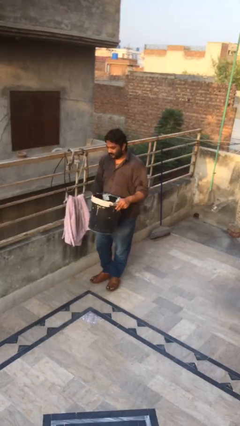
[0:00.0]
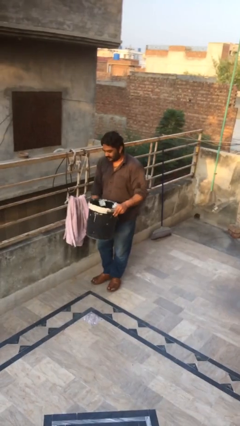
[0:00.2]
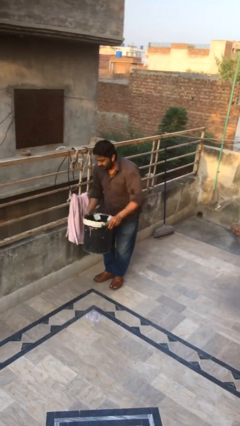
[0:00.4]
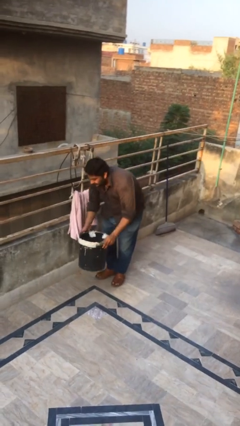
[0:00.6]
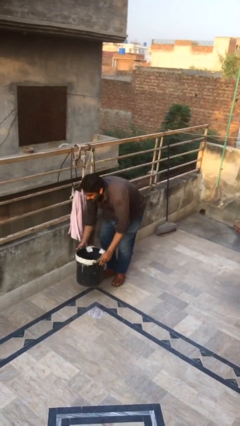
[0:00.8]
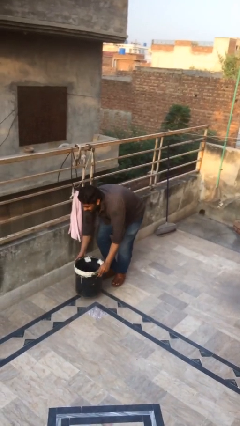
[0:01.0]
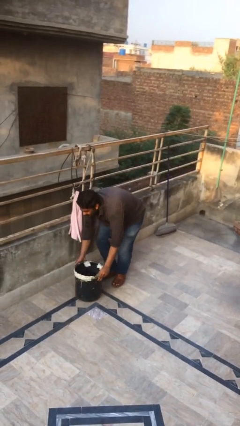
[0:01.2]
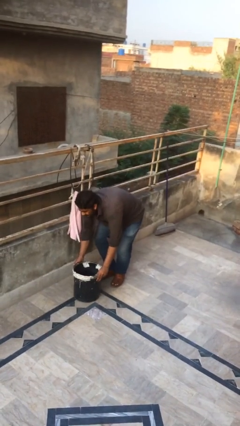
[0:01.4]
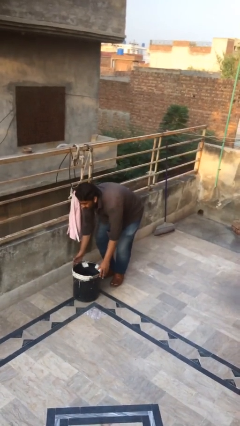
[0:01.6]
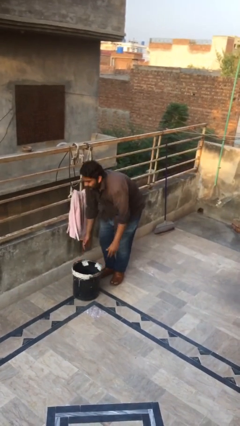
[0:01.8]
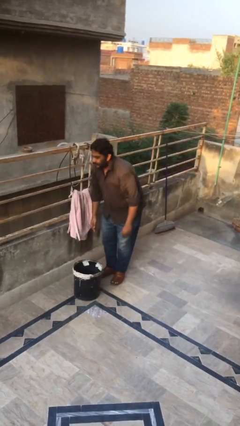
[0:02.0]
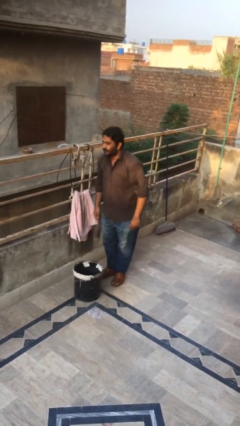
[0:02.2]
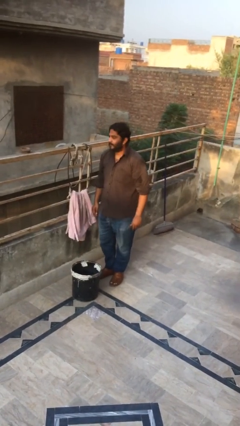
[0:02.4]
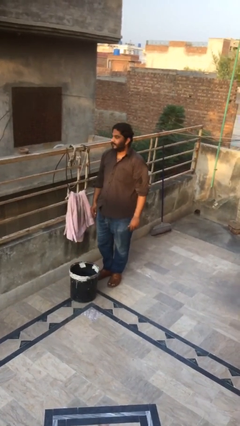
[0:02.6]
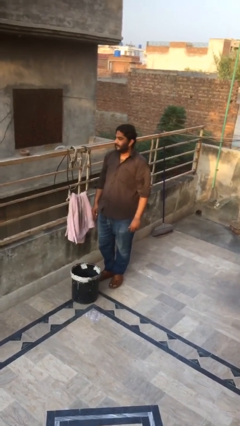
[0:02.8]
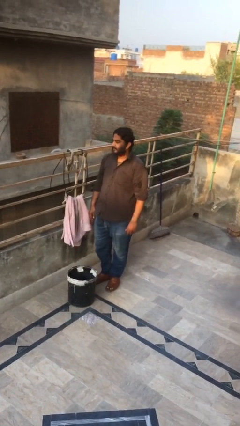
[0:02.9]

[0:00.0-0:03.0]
person puts down object on floor

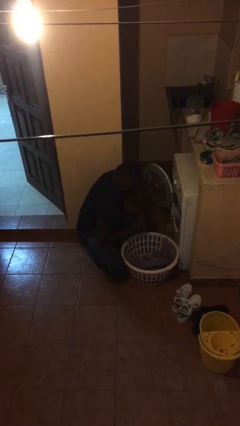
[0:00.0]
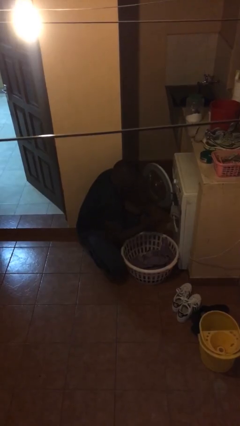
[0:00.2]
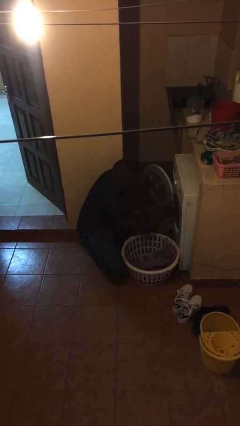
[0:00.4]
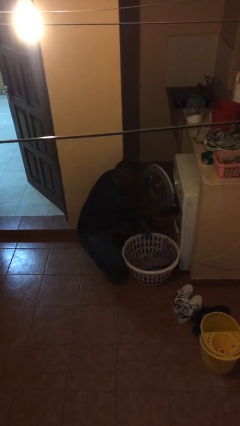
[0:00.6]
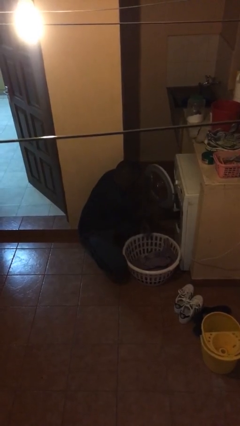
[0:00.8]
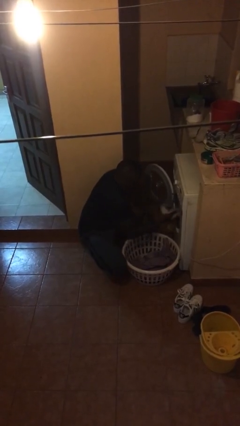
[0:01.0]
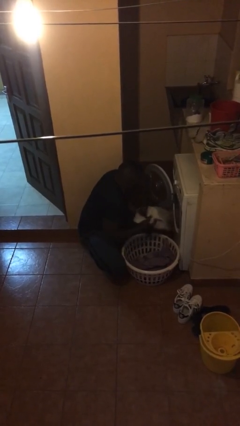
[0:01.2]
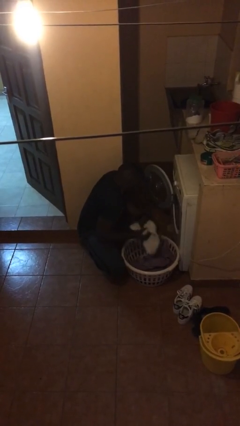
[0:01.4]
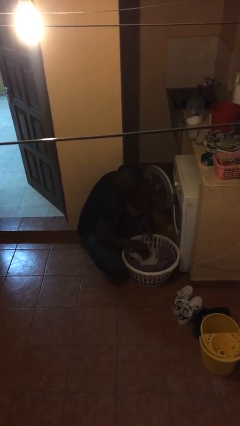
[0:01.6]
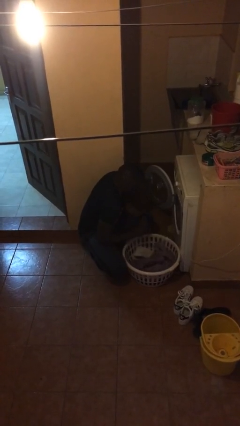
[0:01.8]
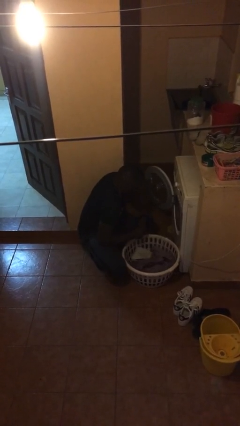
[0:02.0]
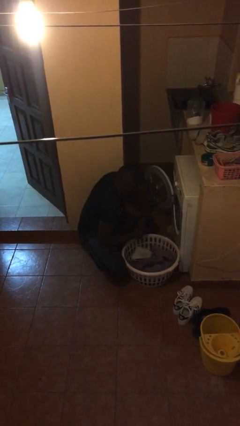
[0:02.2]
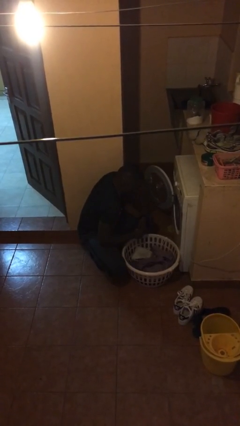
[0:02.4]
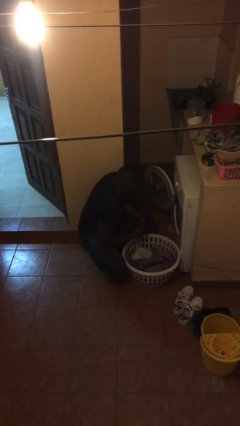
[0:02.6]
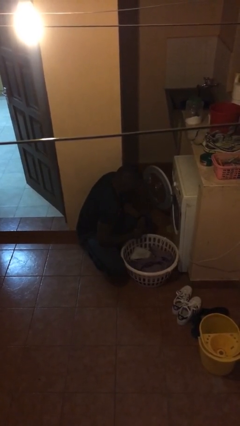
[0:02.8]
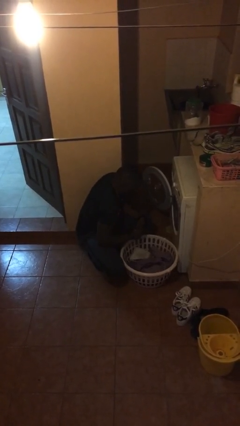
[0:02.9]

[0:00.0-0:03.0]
person unloads clotheswasher

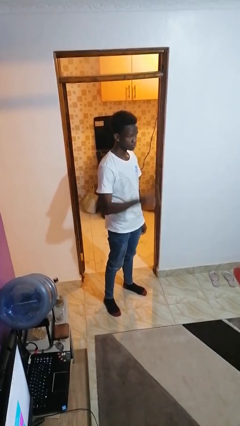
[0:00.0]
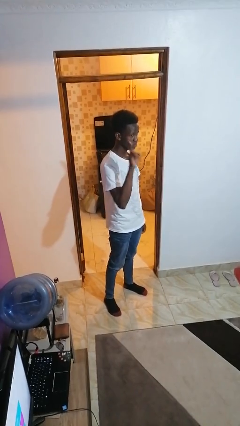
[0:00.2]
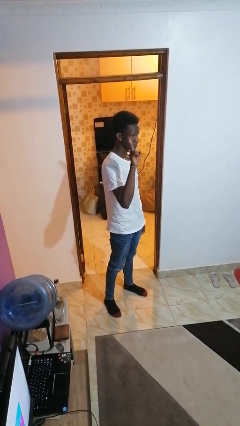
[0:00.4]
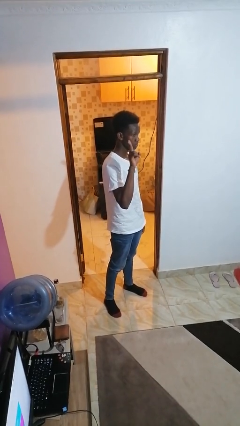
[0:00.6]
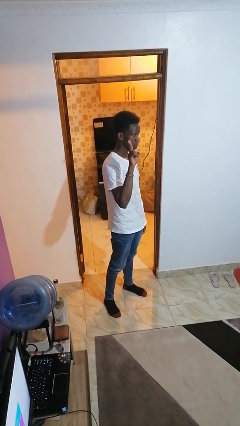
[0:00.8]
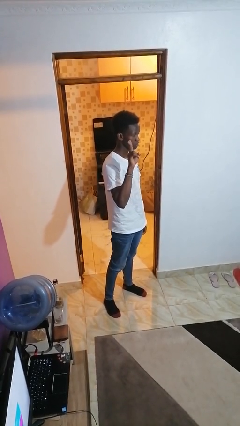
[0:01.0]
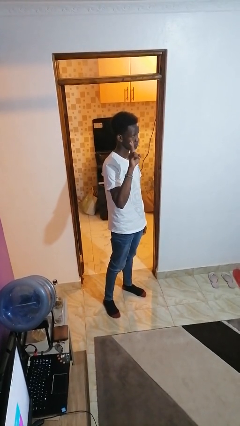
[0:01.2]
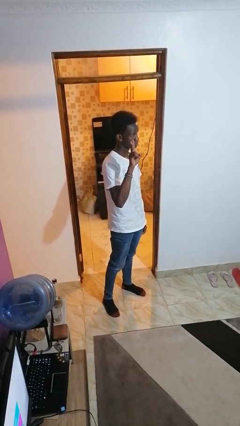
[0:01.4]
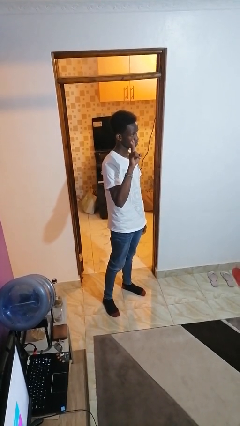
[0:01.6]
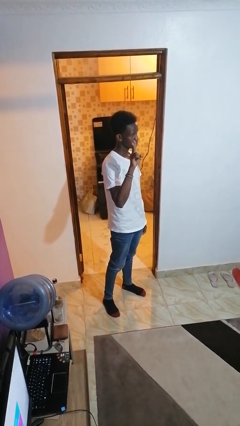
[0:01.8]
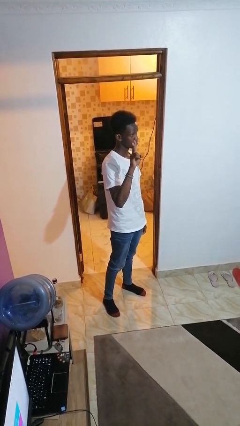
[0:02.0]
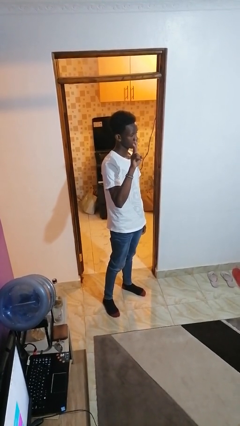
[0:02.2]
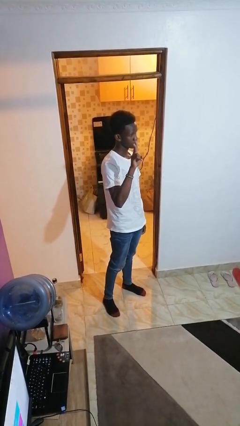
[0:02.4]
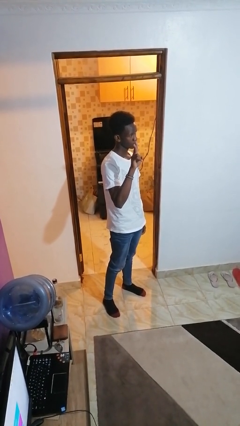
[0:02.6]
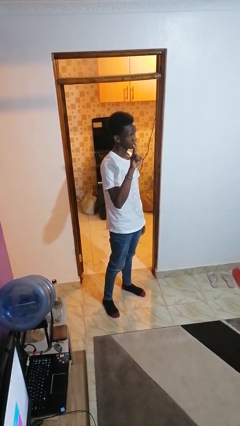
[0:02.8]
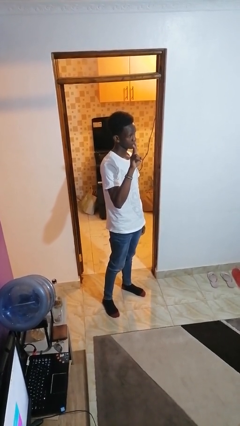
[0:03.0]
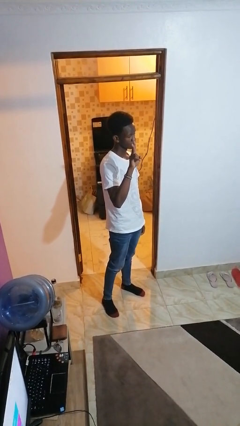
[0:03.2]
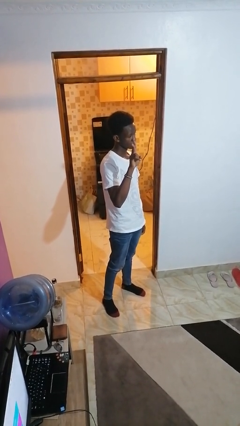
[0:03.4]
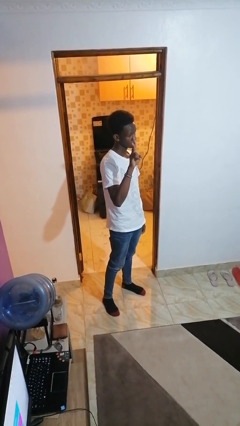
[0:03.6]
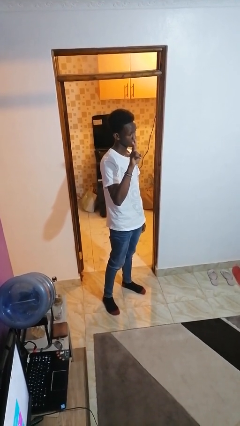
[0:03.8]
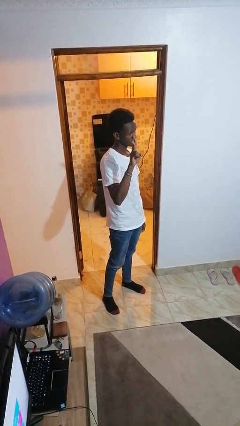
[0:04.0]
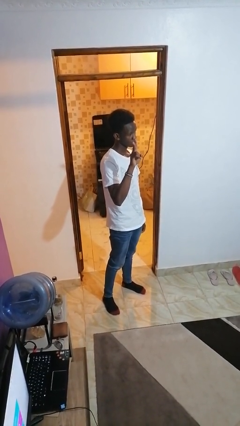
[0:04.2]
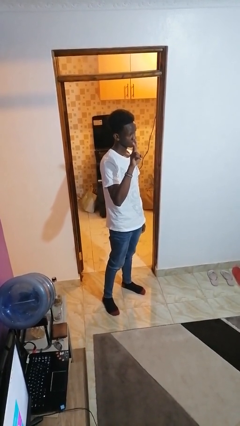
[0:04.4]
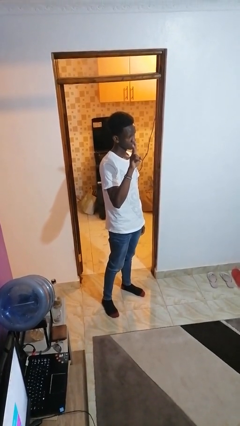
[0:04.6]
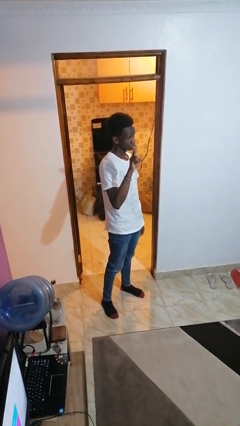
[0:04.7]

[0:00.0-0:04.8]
person gestures peace

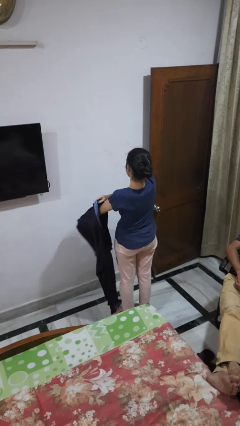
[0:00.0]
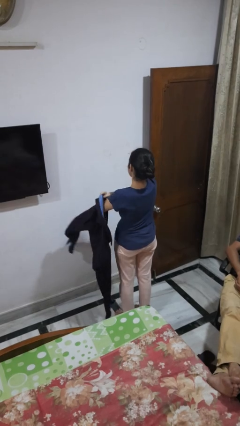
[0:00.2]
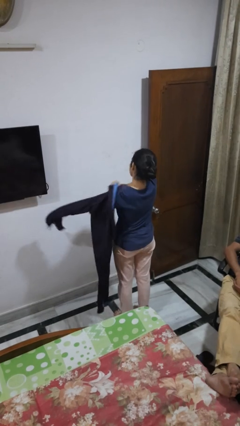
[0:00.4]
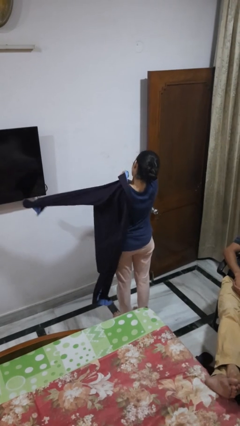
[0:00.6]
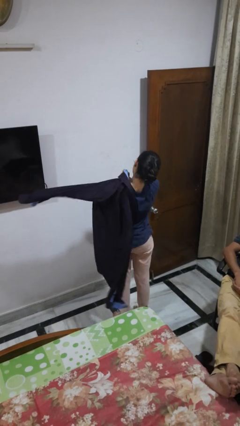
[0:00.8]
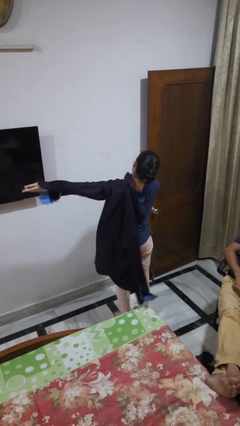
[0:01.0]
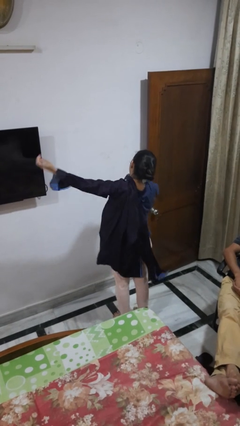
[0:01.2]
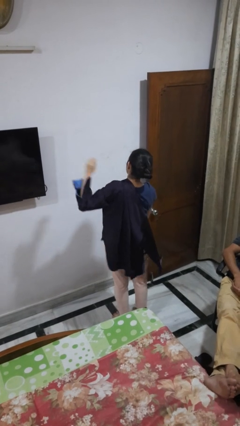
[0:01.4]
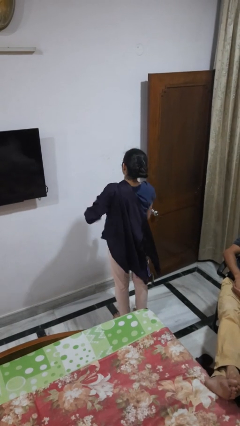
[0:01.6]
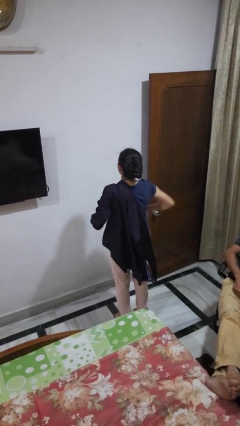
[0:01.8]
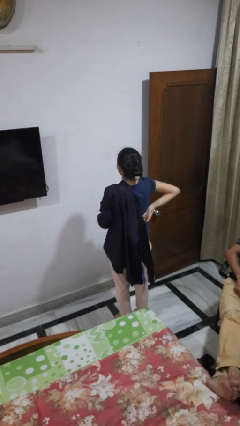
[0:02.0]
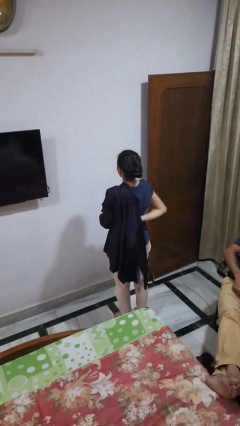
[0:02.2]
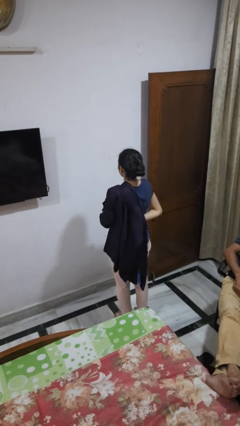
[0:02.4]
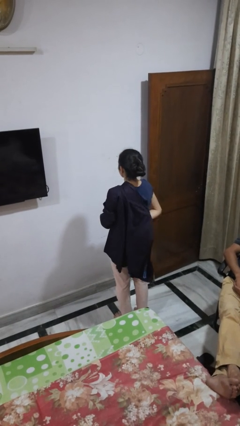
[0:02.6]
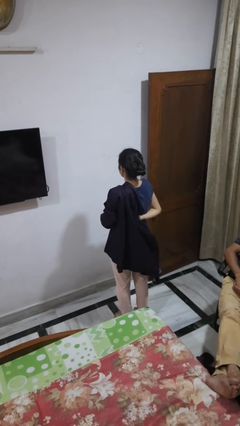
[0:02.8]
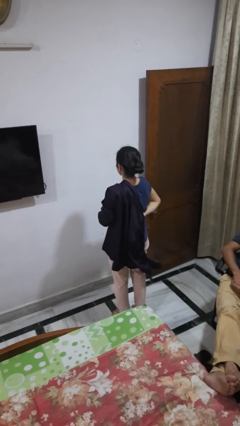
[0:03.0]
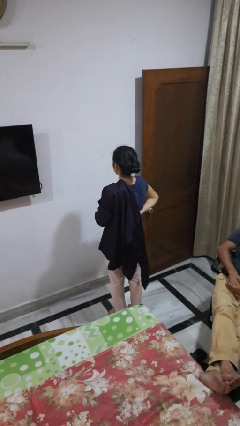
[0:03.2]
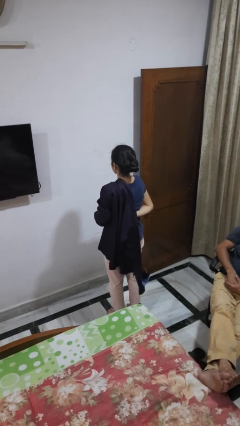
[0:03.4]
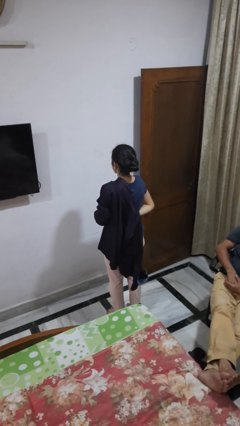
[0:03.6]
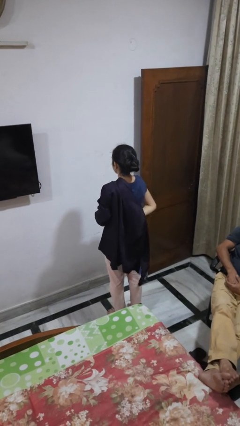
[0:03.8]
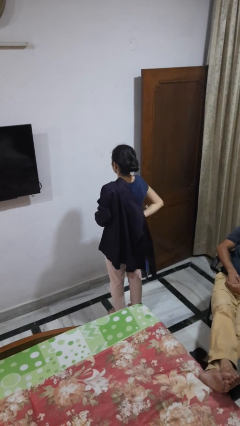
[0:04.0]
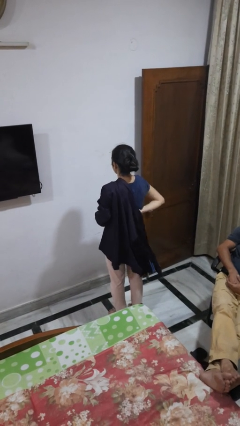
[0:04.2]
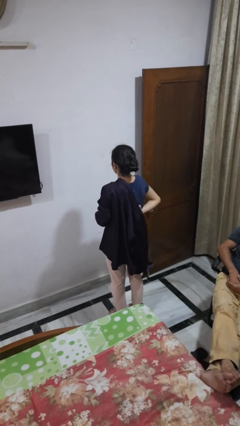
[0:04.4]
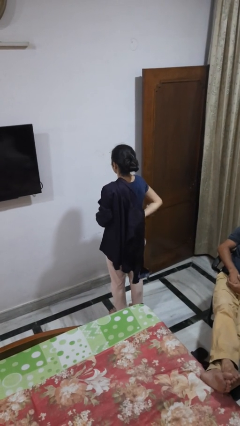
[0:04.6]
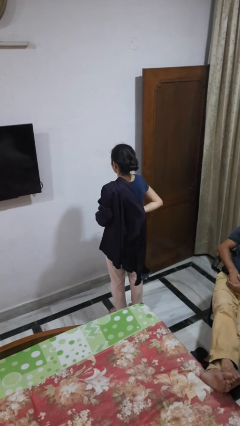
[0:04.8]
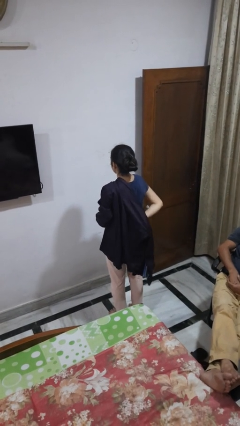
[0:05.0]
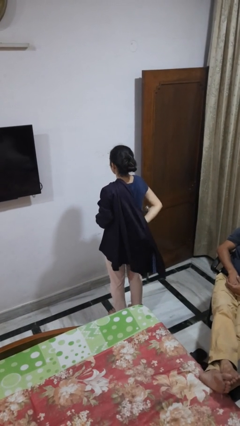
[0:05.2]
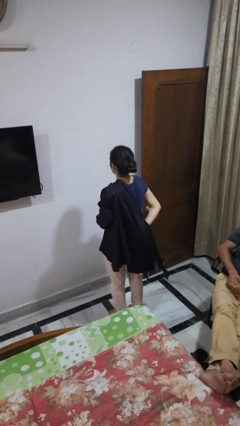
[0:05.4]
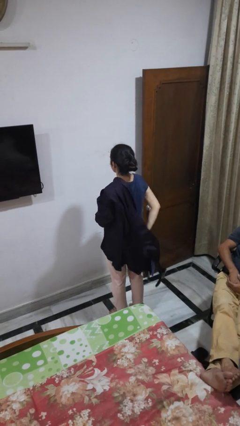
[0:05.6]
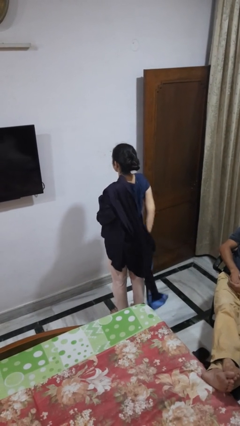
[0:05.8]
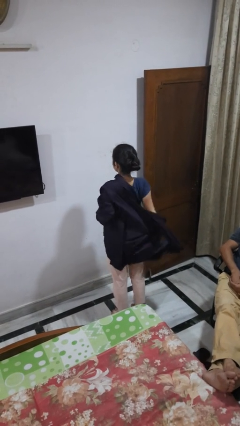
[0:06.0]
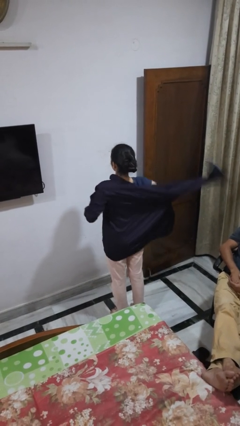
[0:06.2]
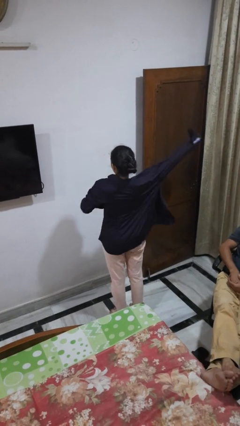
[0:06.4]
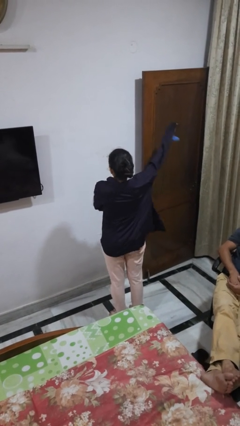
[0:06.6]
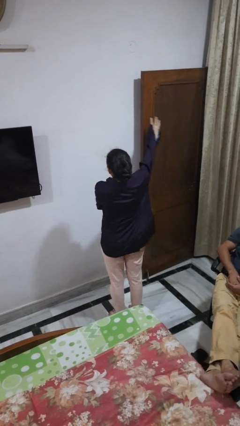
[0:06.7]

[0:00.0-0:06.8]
person puts on shirt

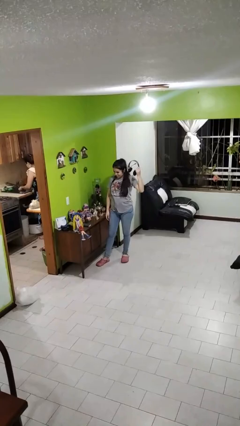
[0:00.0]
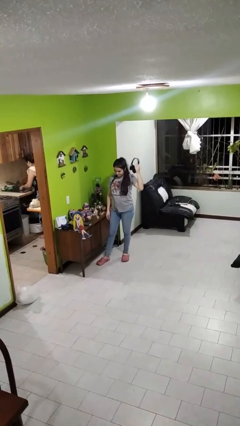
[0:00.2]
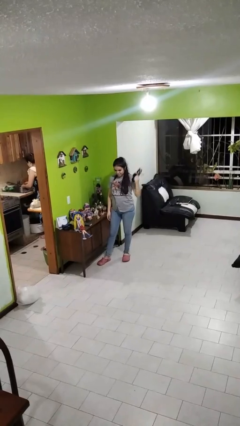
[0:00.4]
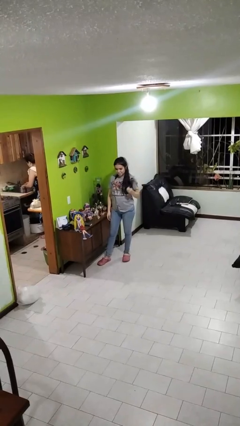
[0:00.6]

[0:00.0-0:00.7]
person takes off headphones
